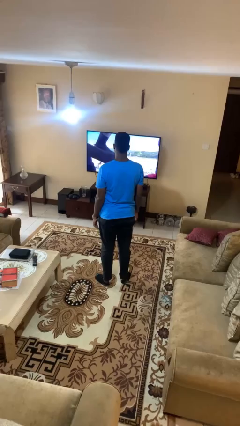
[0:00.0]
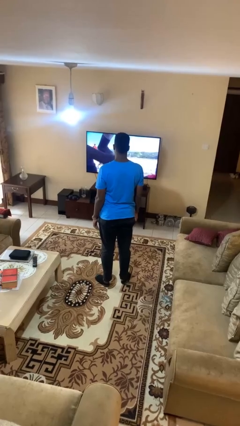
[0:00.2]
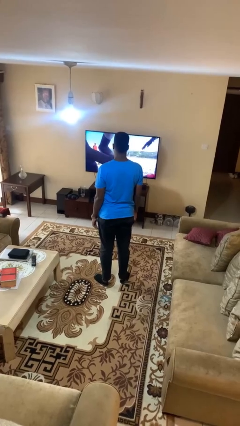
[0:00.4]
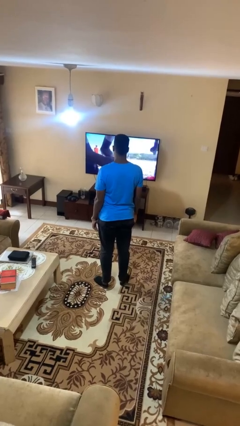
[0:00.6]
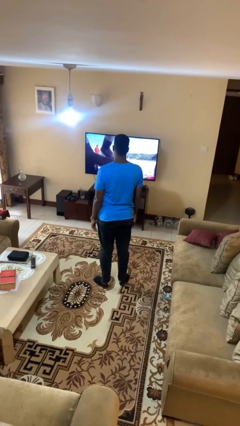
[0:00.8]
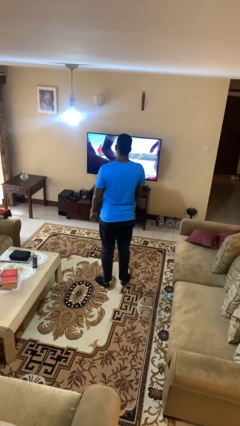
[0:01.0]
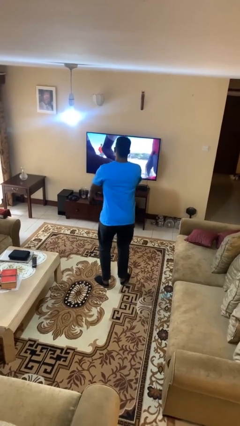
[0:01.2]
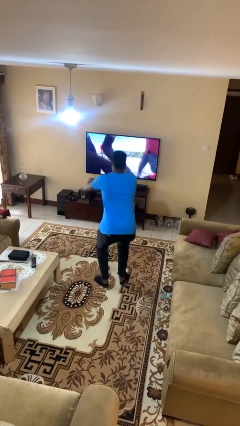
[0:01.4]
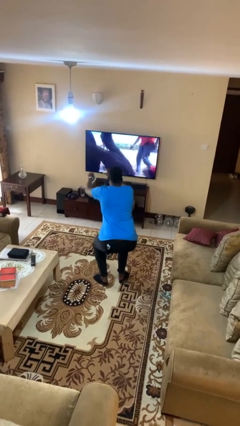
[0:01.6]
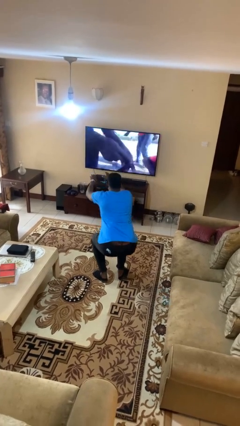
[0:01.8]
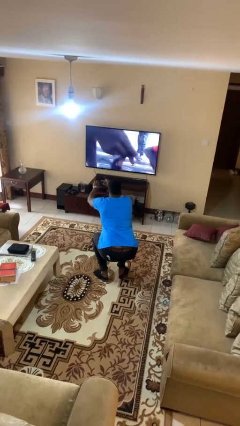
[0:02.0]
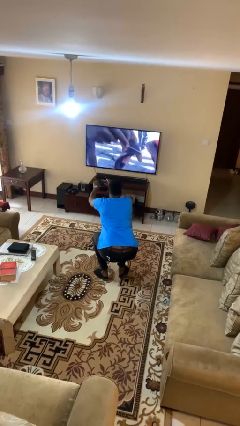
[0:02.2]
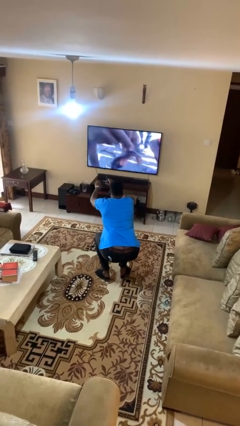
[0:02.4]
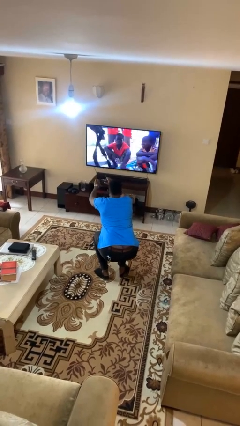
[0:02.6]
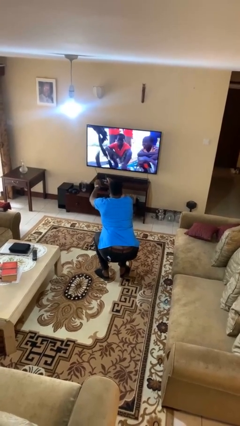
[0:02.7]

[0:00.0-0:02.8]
person squats

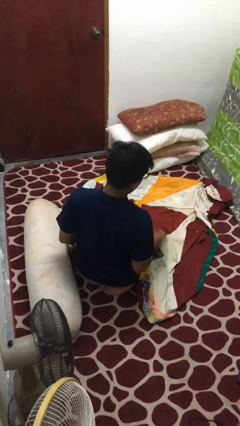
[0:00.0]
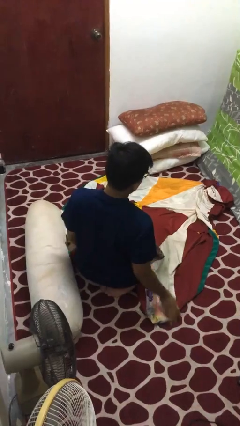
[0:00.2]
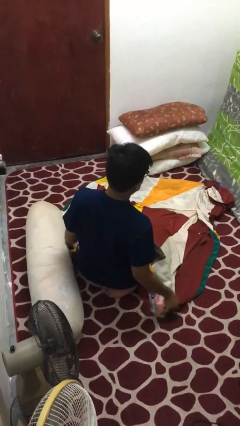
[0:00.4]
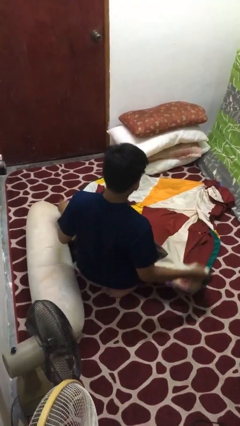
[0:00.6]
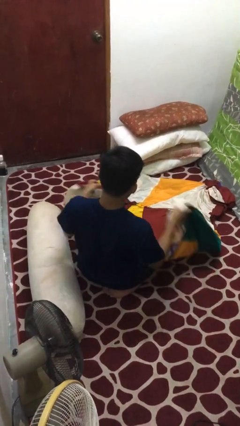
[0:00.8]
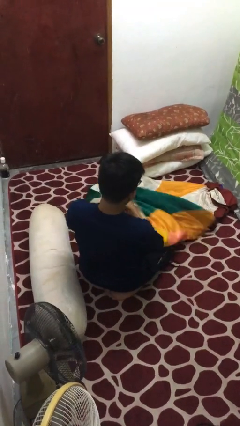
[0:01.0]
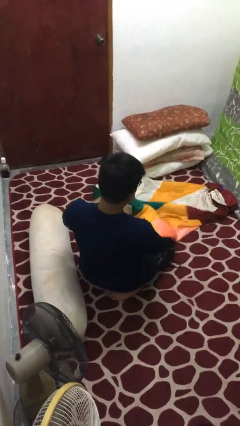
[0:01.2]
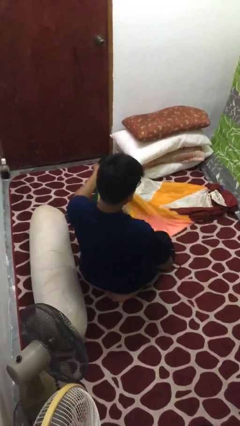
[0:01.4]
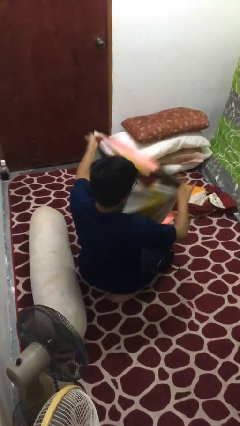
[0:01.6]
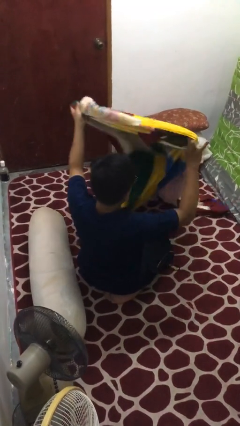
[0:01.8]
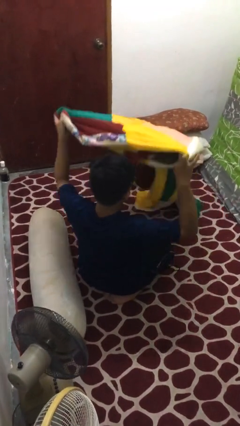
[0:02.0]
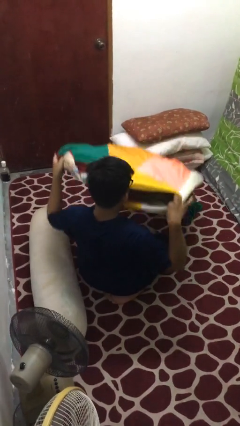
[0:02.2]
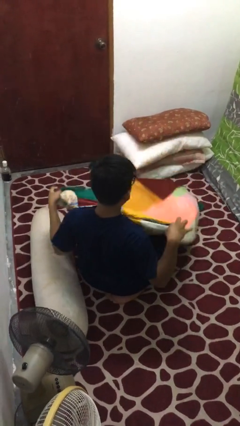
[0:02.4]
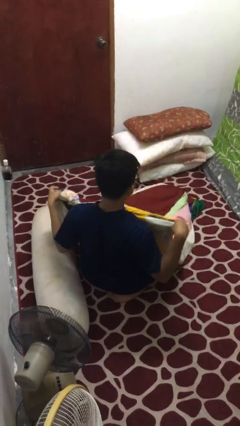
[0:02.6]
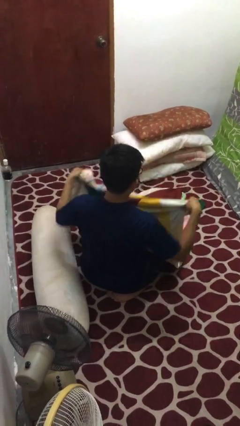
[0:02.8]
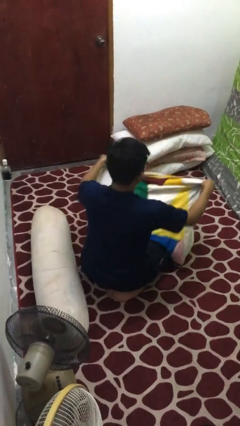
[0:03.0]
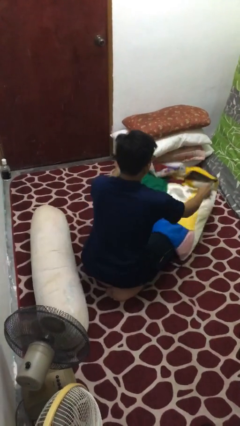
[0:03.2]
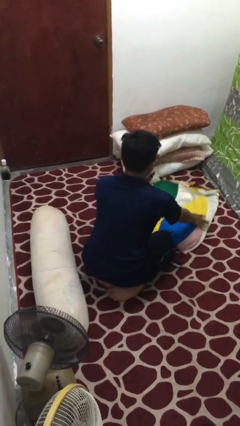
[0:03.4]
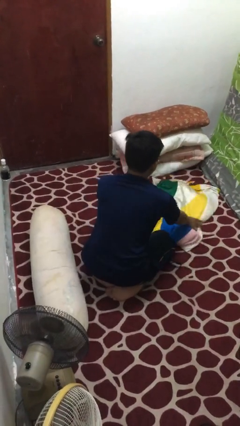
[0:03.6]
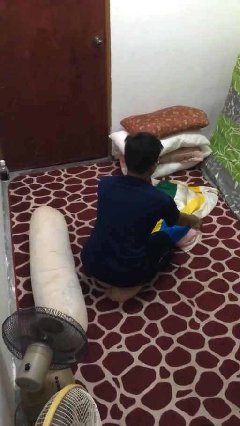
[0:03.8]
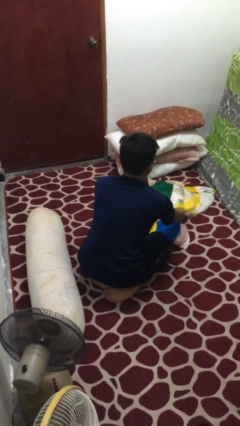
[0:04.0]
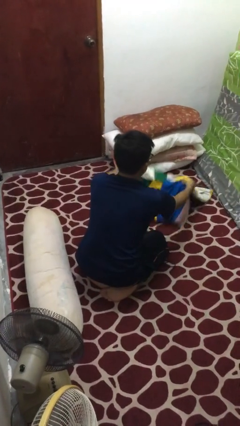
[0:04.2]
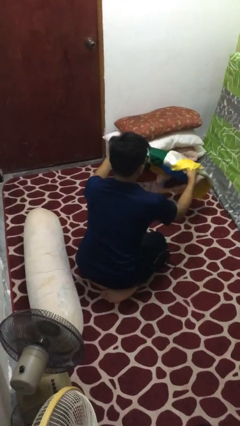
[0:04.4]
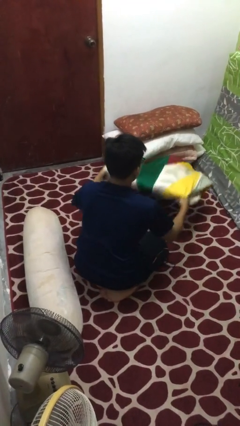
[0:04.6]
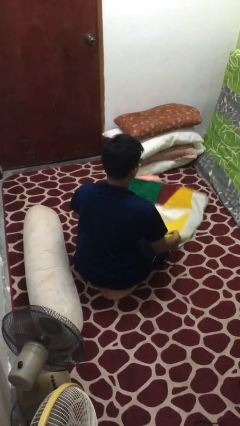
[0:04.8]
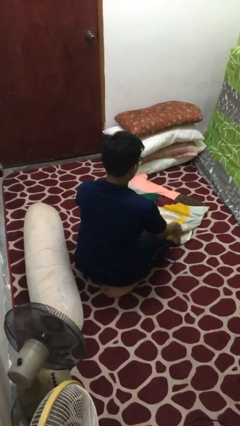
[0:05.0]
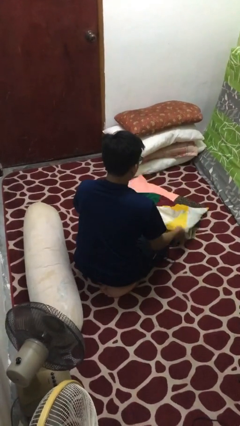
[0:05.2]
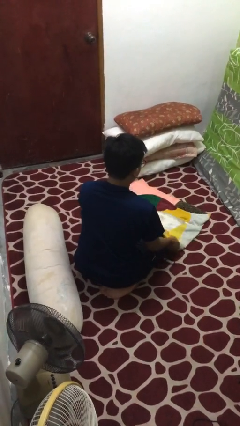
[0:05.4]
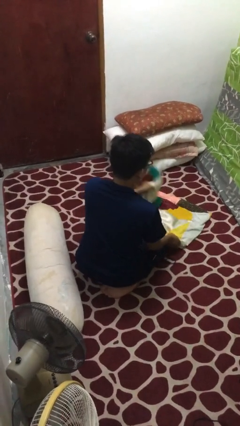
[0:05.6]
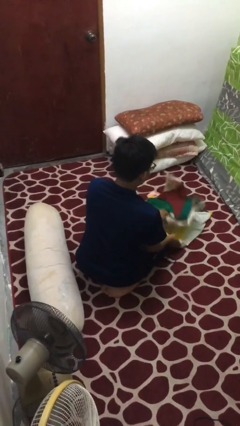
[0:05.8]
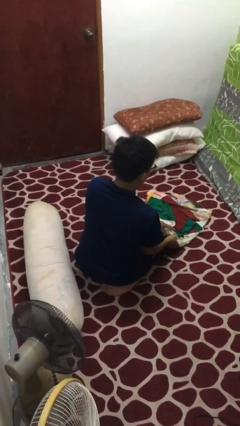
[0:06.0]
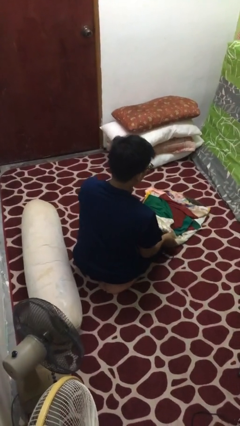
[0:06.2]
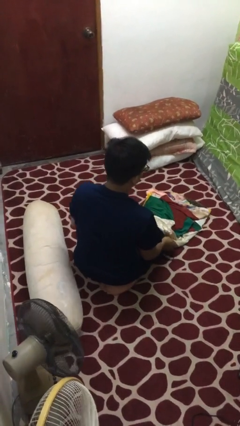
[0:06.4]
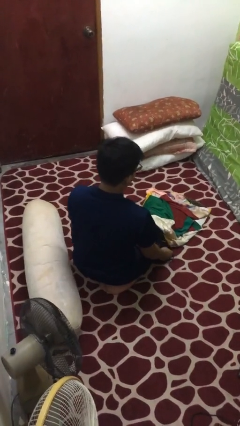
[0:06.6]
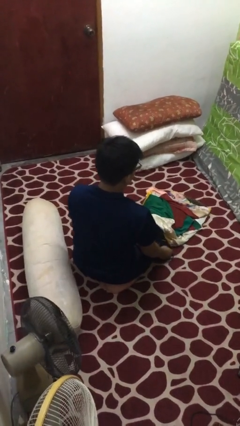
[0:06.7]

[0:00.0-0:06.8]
person folds blanket

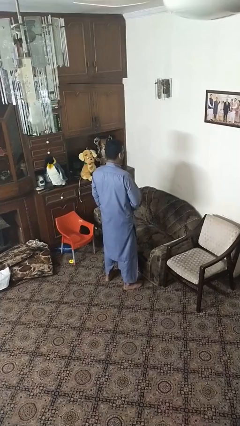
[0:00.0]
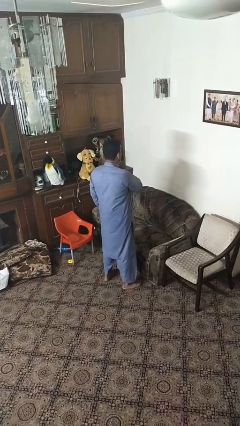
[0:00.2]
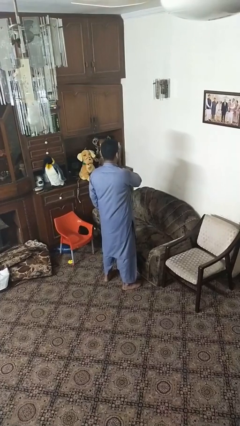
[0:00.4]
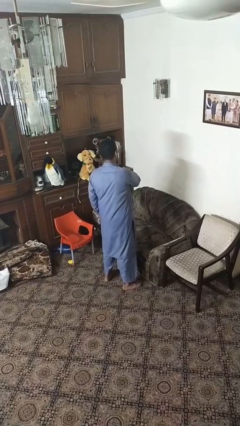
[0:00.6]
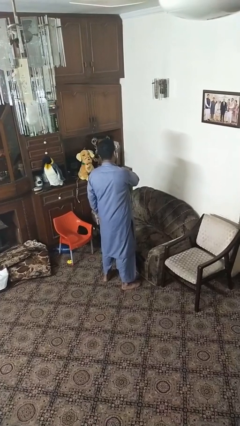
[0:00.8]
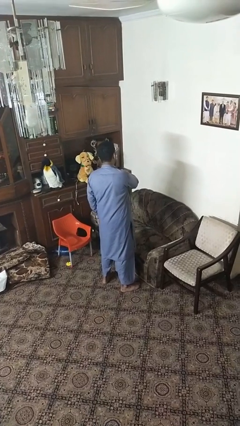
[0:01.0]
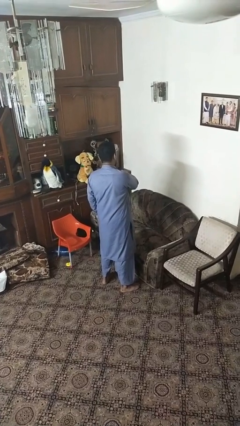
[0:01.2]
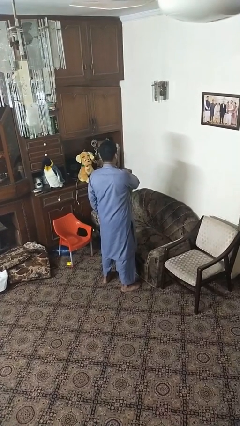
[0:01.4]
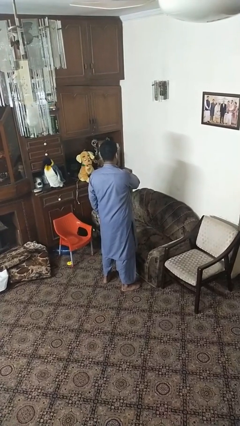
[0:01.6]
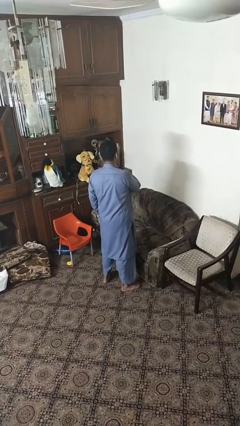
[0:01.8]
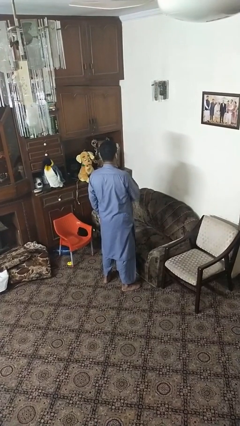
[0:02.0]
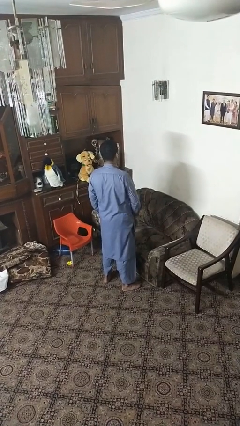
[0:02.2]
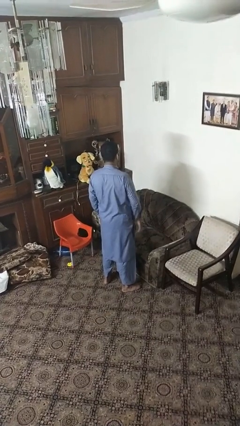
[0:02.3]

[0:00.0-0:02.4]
person strokes chin

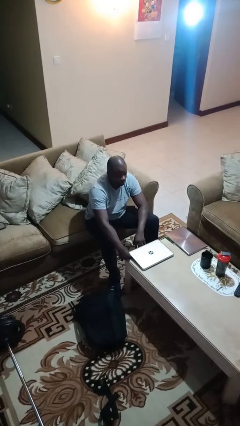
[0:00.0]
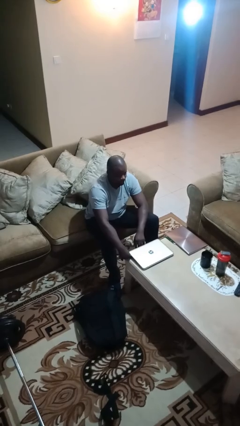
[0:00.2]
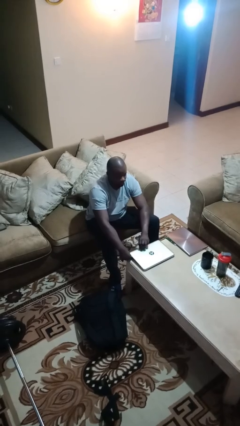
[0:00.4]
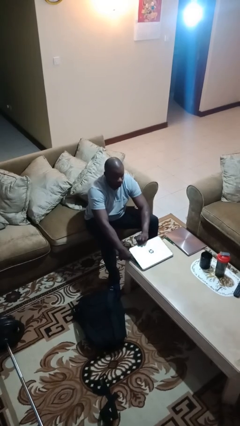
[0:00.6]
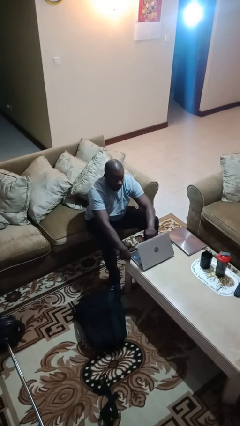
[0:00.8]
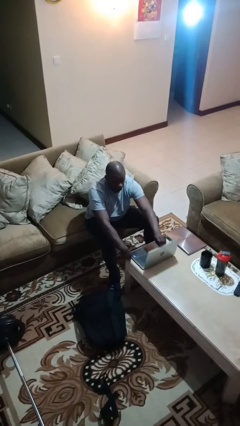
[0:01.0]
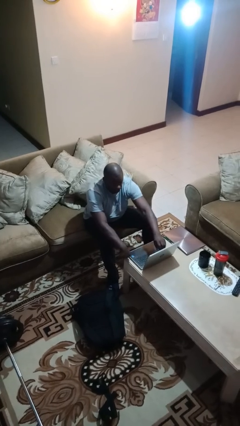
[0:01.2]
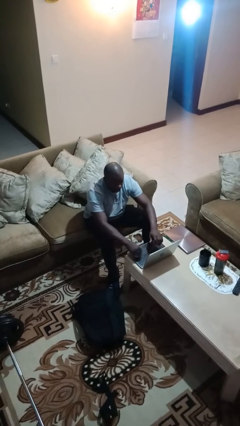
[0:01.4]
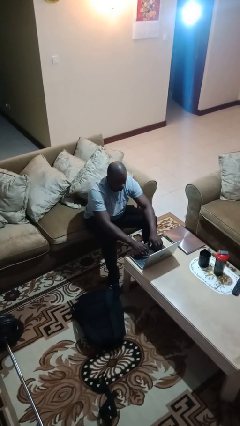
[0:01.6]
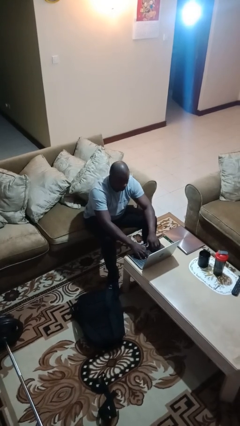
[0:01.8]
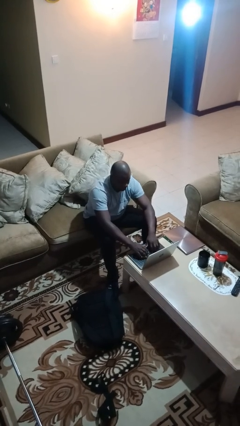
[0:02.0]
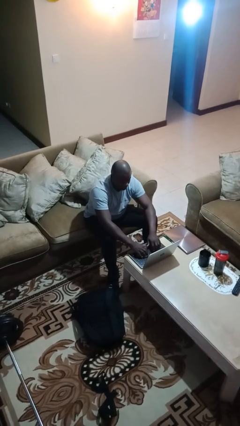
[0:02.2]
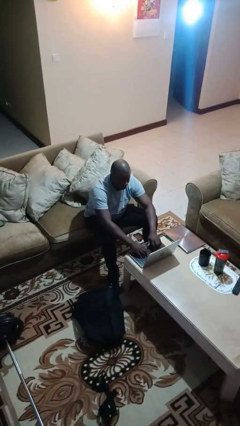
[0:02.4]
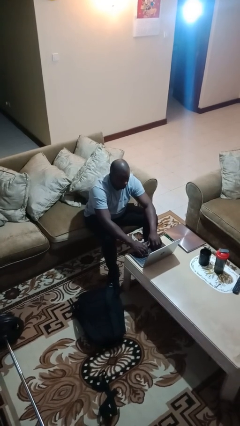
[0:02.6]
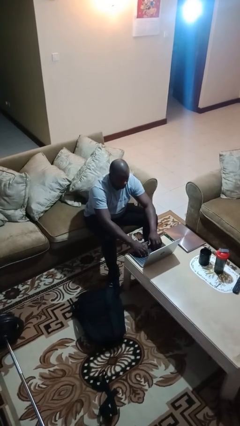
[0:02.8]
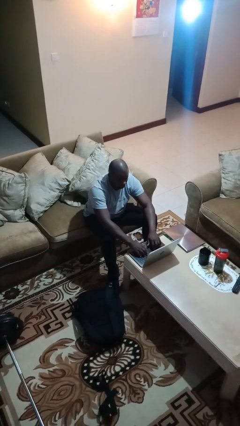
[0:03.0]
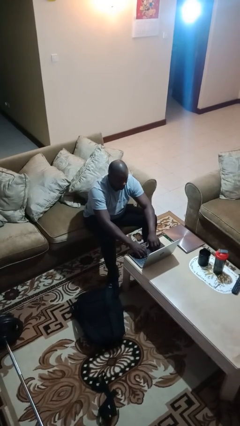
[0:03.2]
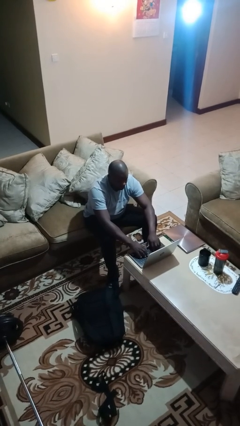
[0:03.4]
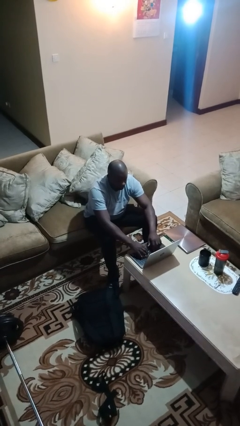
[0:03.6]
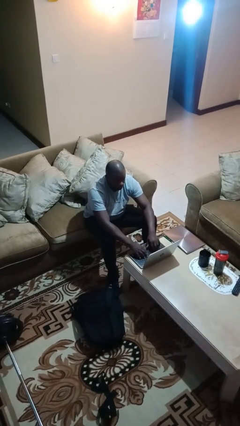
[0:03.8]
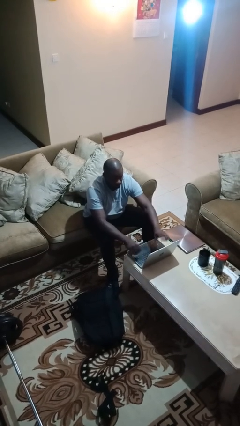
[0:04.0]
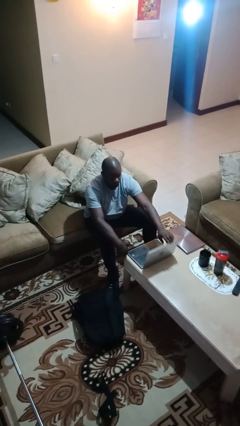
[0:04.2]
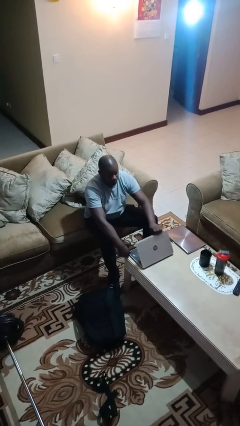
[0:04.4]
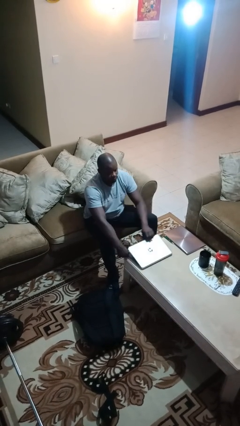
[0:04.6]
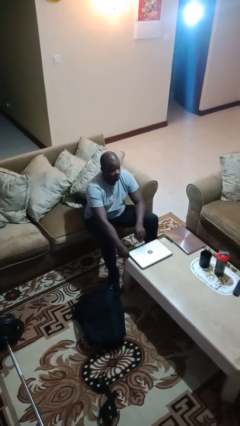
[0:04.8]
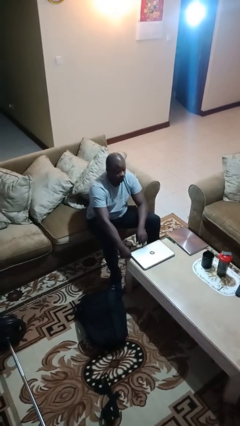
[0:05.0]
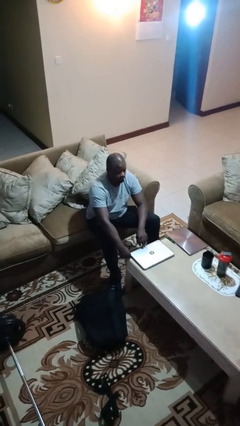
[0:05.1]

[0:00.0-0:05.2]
person interacts with laptop

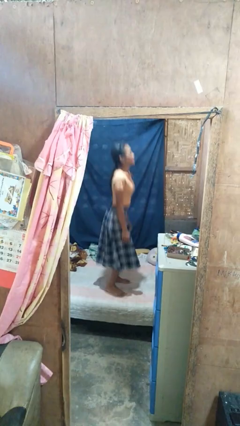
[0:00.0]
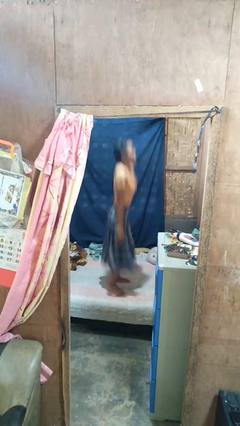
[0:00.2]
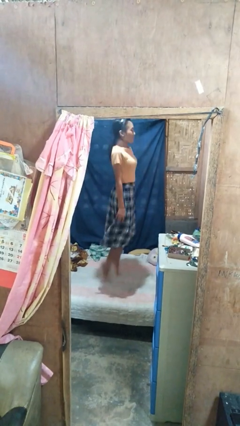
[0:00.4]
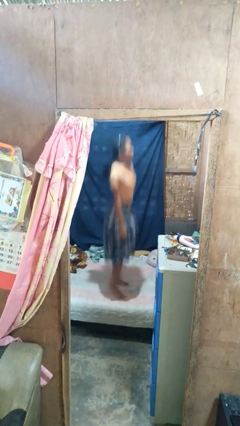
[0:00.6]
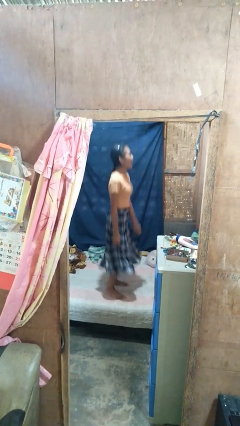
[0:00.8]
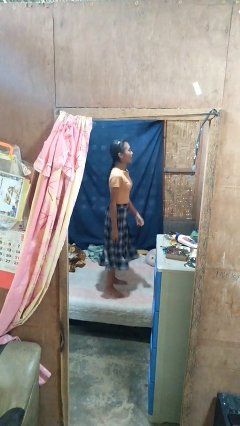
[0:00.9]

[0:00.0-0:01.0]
person jumps on bed
